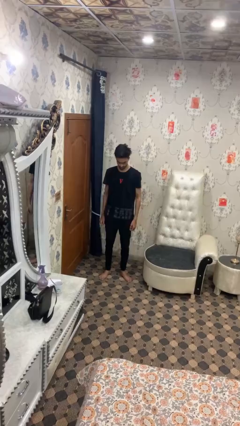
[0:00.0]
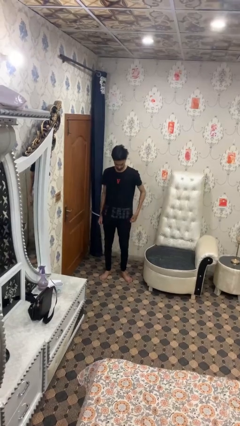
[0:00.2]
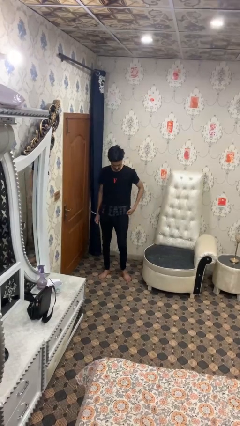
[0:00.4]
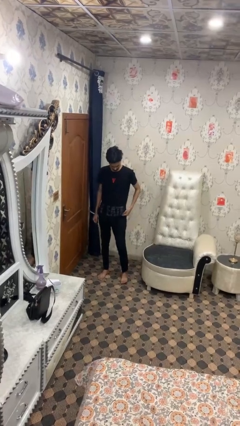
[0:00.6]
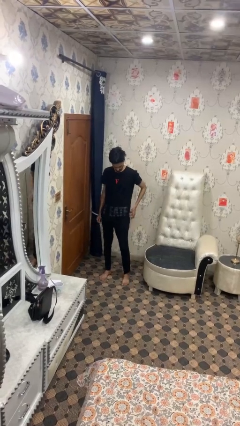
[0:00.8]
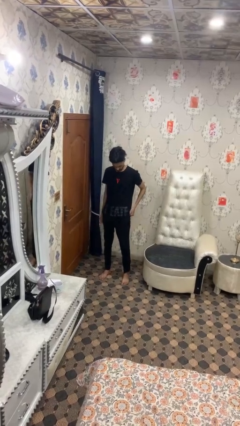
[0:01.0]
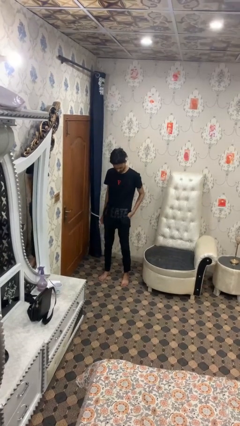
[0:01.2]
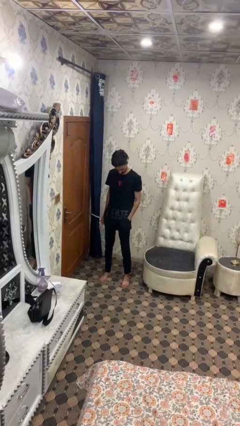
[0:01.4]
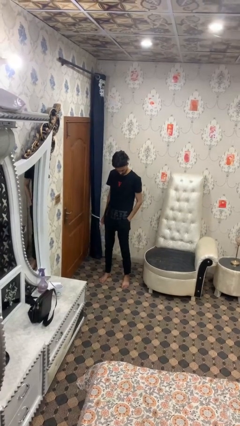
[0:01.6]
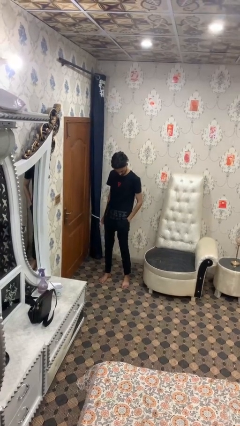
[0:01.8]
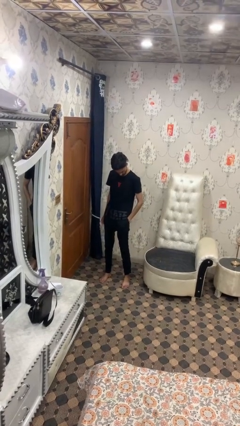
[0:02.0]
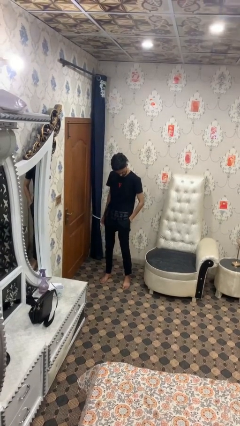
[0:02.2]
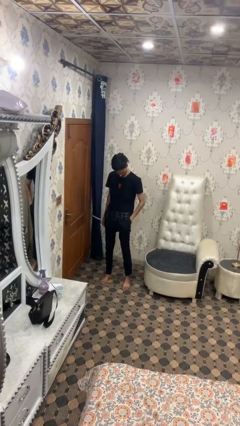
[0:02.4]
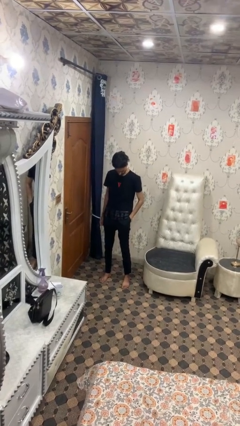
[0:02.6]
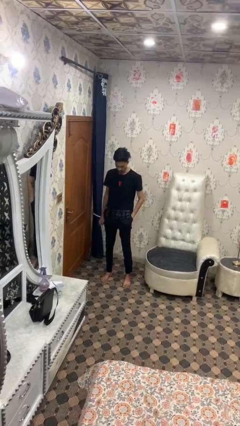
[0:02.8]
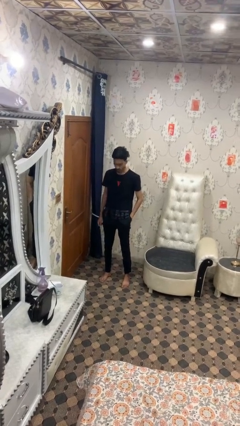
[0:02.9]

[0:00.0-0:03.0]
person puts hands in back pockets

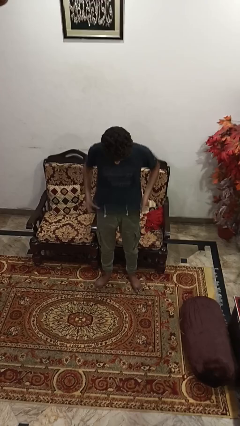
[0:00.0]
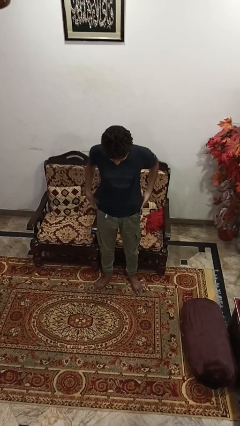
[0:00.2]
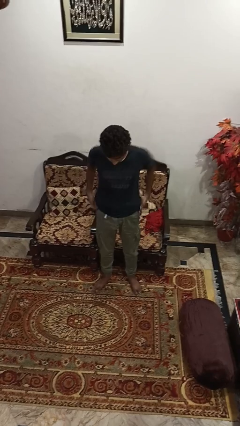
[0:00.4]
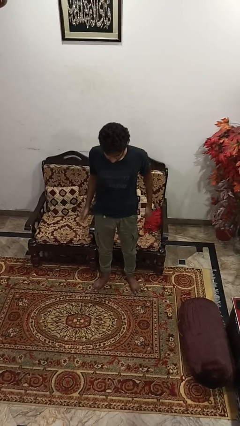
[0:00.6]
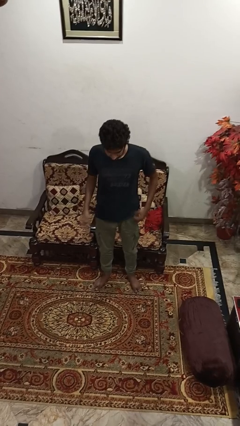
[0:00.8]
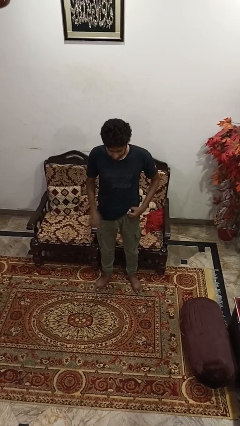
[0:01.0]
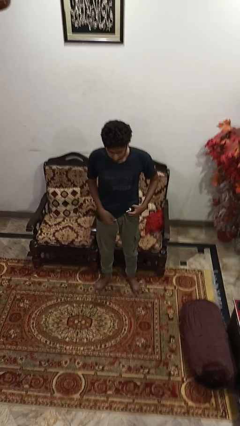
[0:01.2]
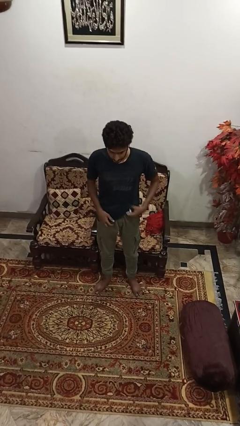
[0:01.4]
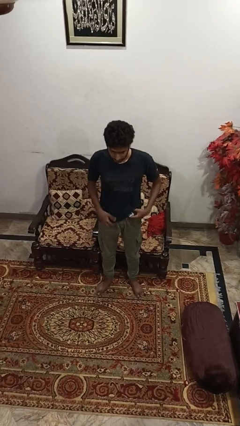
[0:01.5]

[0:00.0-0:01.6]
person untucks shirt

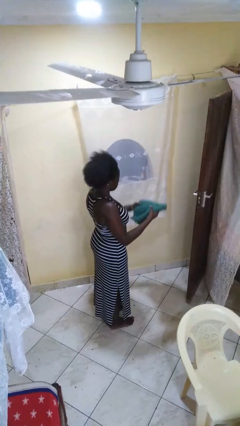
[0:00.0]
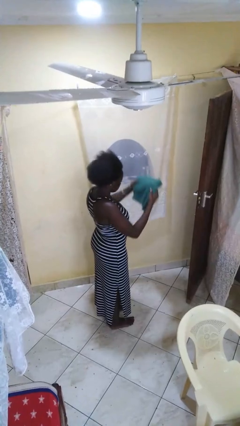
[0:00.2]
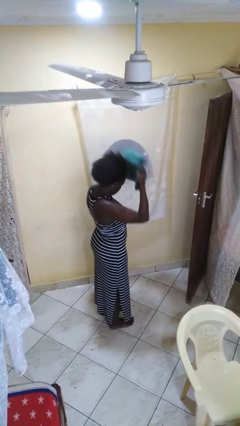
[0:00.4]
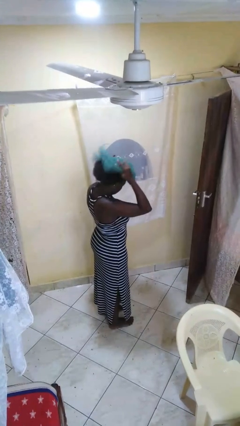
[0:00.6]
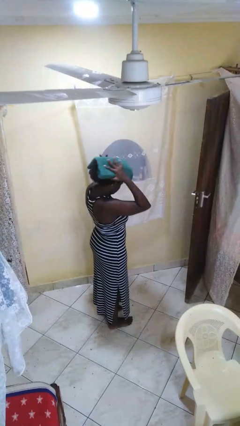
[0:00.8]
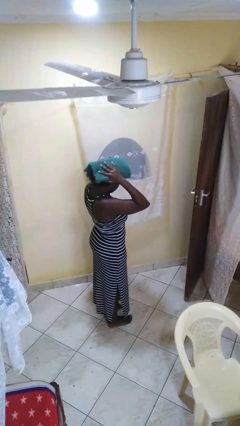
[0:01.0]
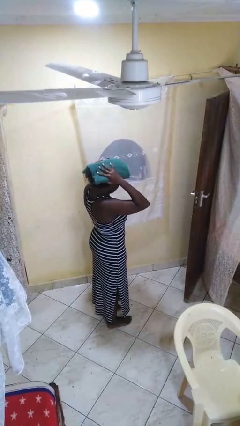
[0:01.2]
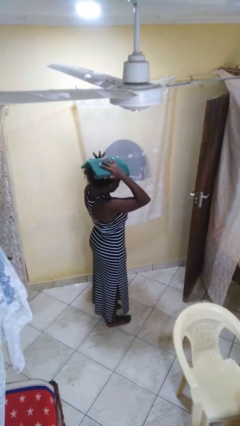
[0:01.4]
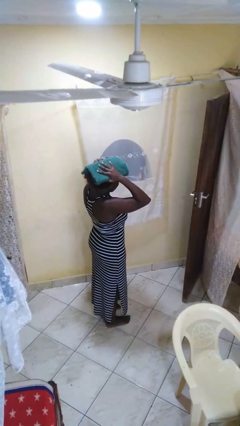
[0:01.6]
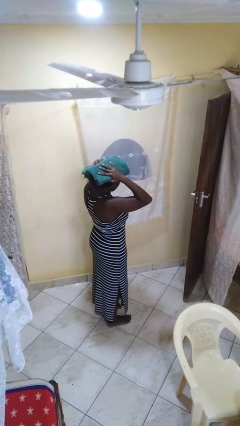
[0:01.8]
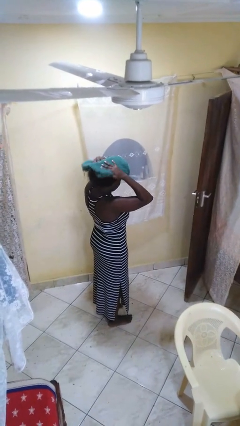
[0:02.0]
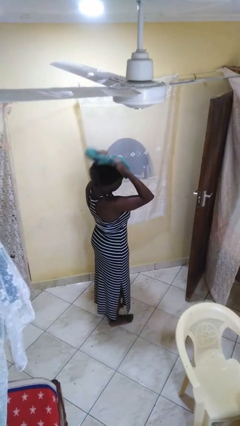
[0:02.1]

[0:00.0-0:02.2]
person dries hair with towel

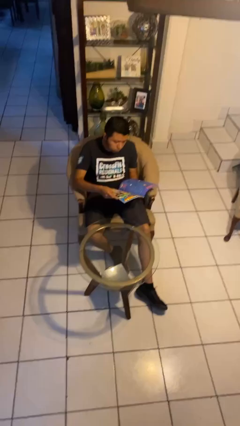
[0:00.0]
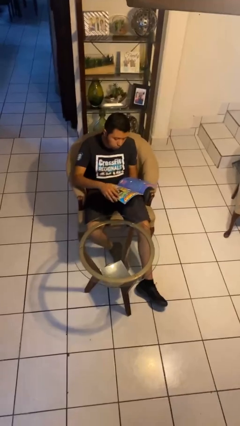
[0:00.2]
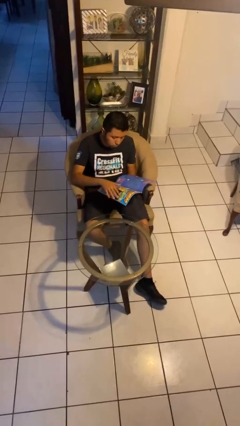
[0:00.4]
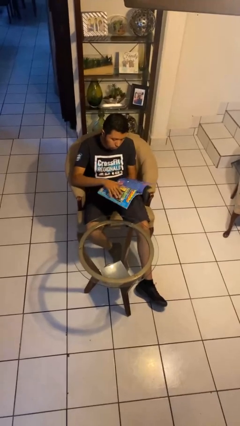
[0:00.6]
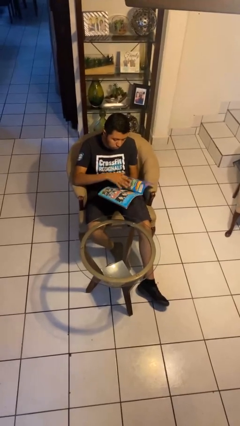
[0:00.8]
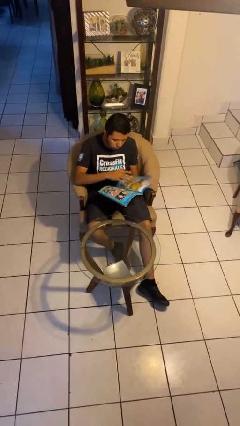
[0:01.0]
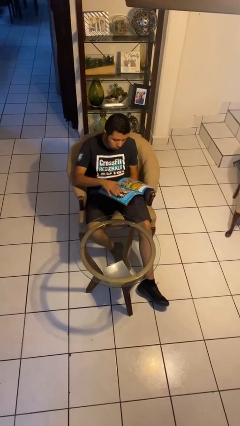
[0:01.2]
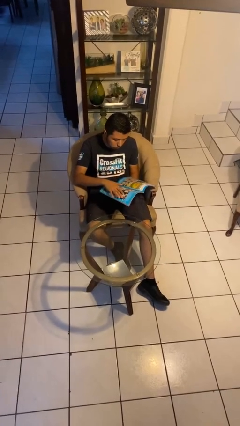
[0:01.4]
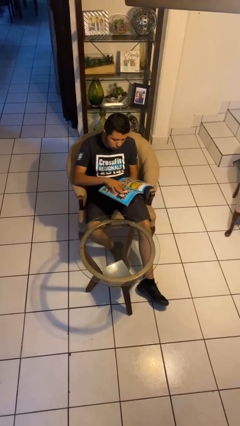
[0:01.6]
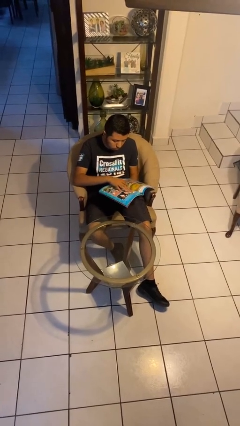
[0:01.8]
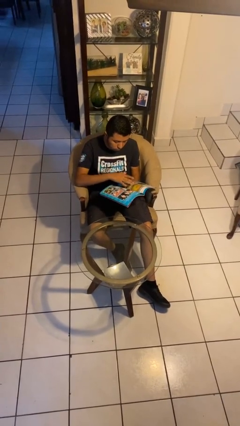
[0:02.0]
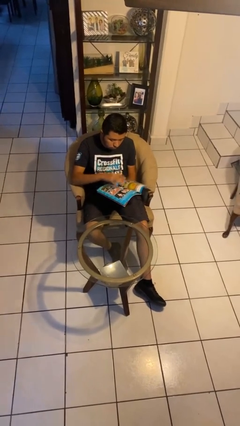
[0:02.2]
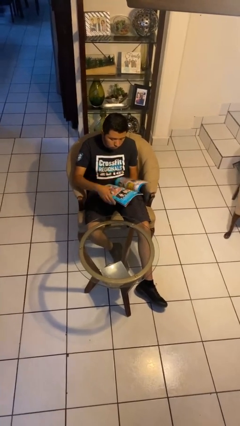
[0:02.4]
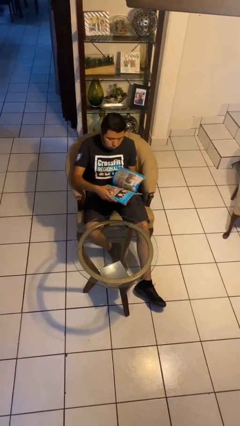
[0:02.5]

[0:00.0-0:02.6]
person reads magazine

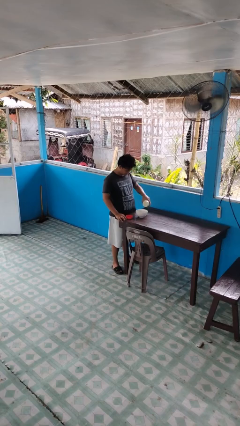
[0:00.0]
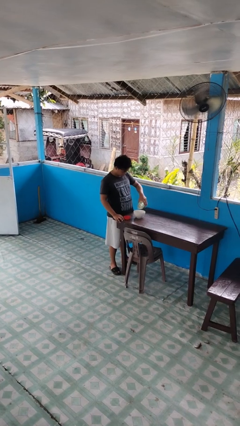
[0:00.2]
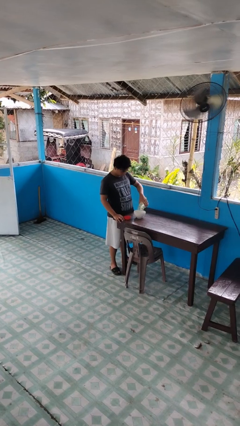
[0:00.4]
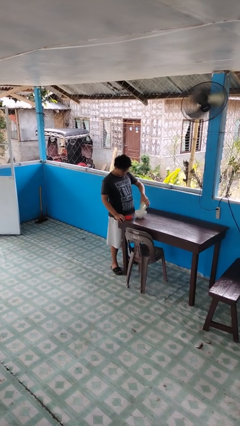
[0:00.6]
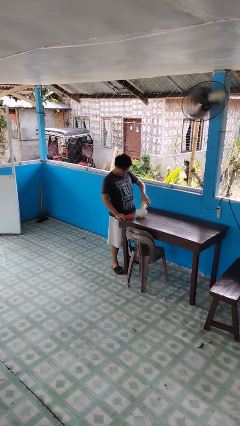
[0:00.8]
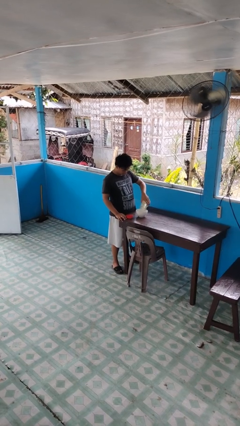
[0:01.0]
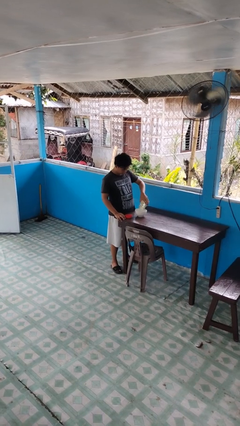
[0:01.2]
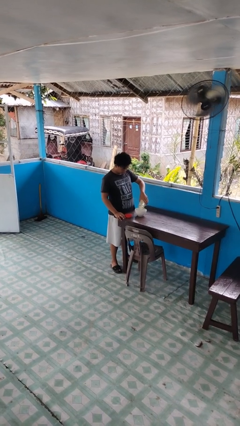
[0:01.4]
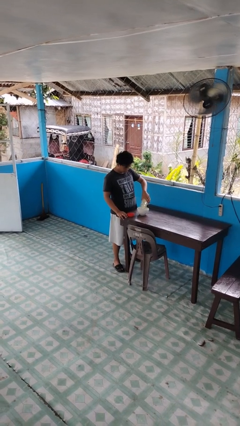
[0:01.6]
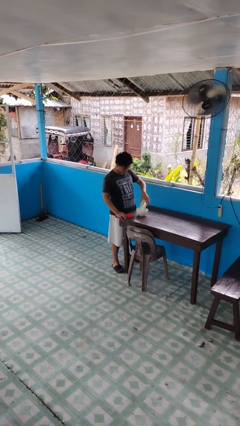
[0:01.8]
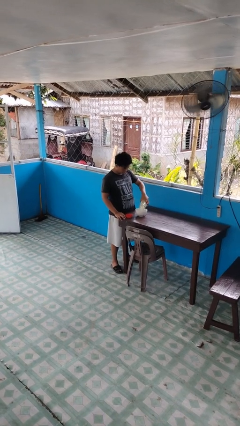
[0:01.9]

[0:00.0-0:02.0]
person pours into bowl

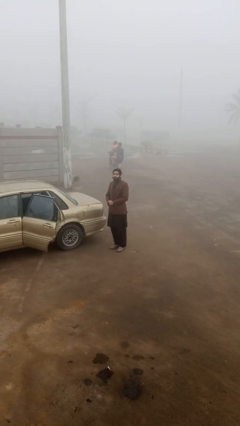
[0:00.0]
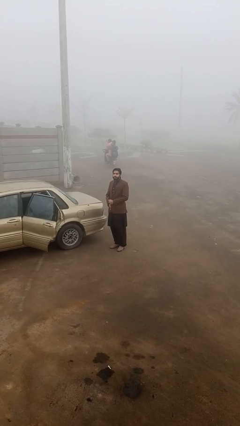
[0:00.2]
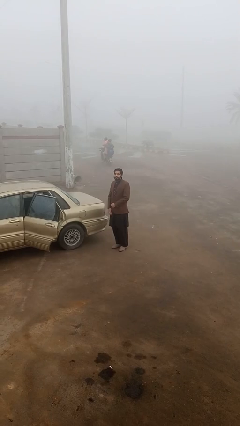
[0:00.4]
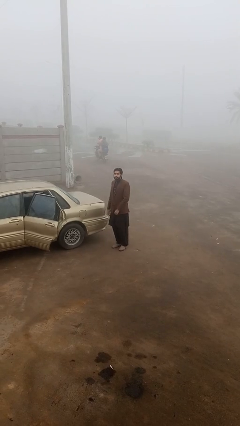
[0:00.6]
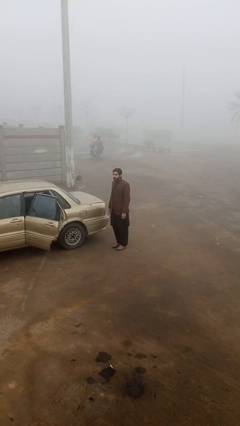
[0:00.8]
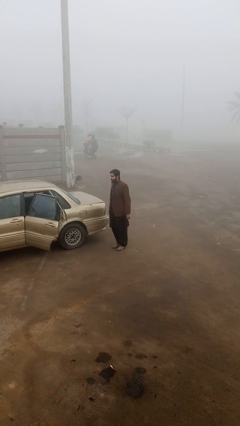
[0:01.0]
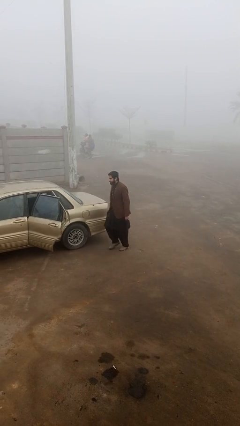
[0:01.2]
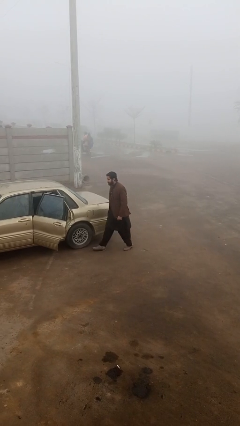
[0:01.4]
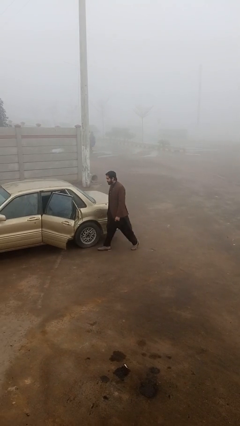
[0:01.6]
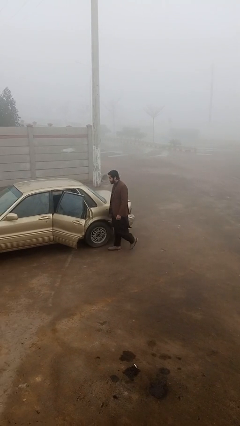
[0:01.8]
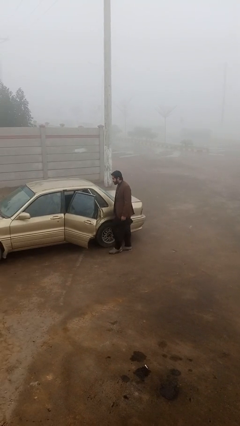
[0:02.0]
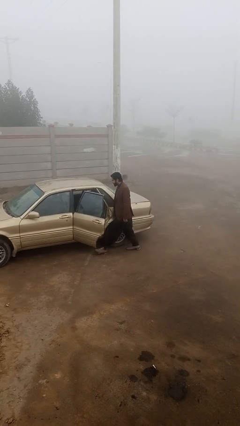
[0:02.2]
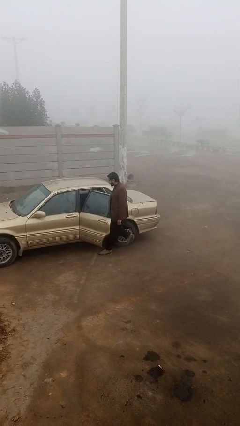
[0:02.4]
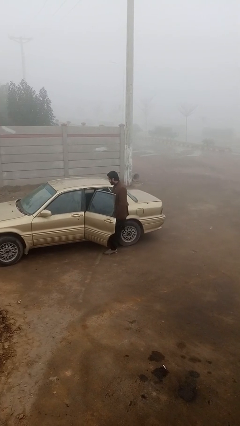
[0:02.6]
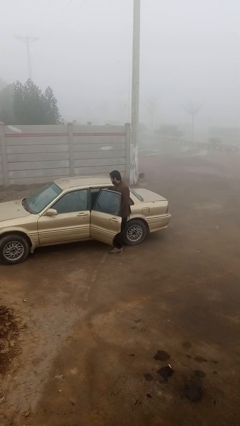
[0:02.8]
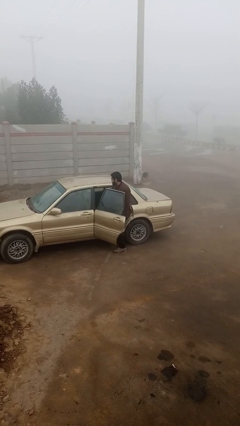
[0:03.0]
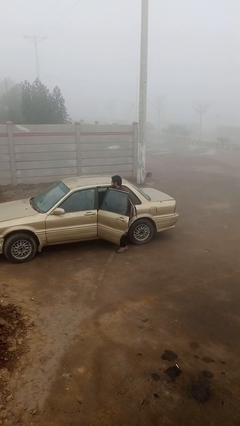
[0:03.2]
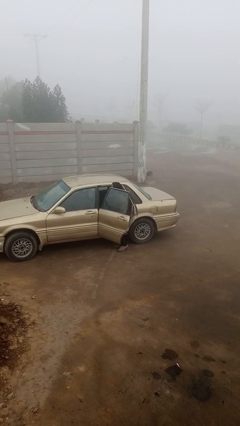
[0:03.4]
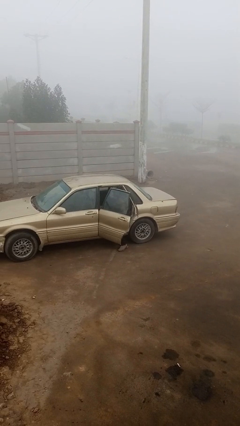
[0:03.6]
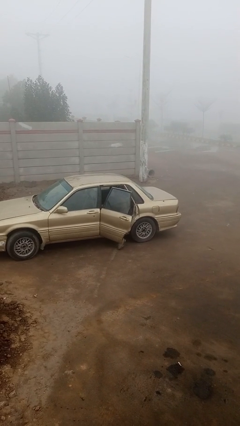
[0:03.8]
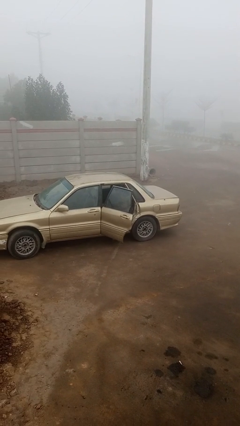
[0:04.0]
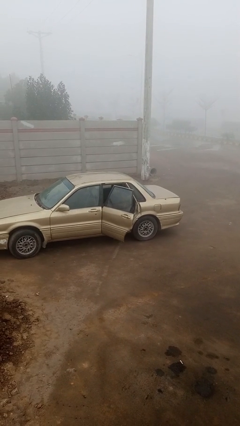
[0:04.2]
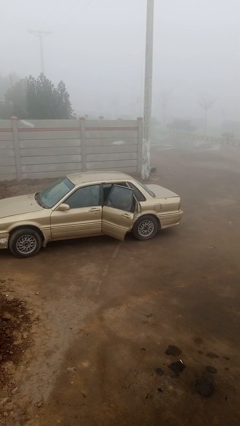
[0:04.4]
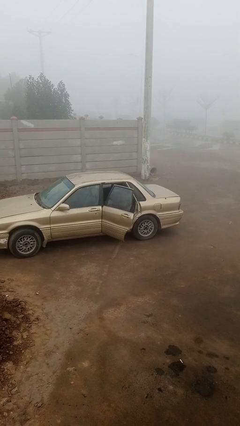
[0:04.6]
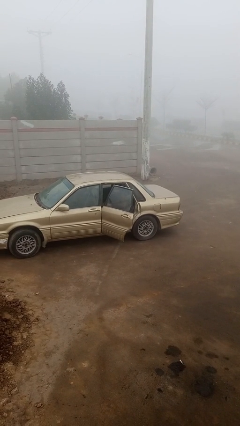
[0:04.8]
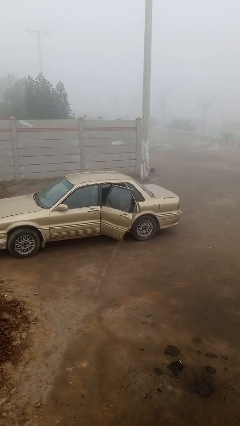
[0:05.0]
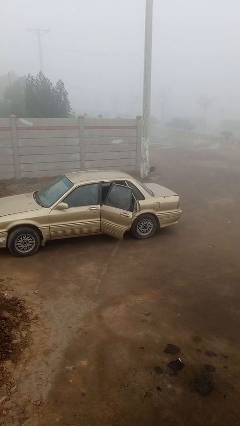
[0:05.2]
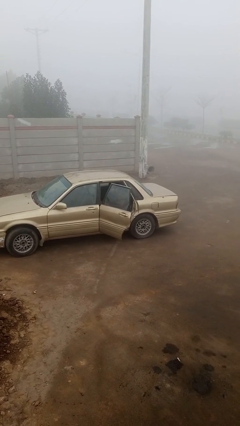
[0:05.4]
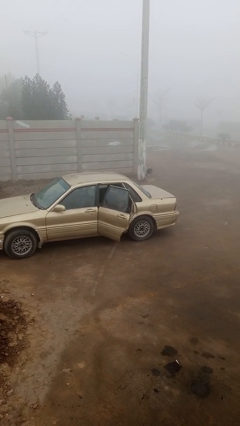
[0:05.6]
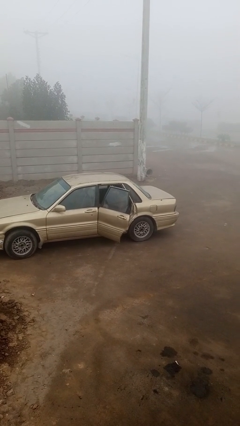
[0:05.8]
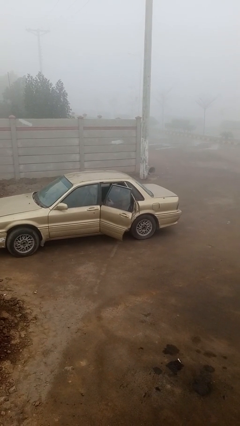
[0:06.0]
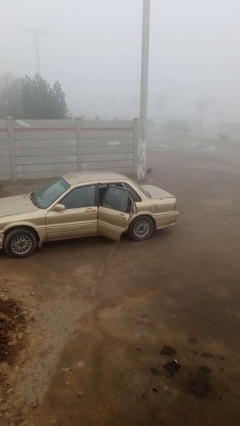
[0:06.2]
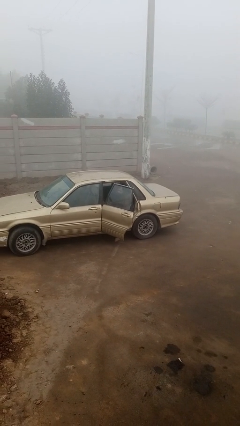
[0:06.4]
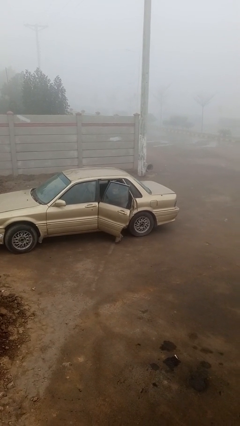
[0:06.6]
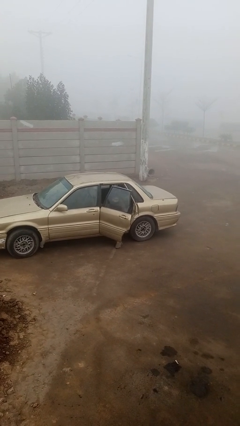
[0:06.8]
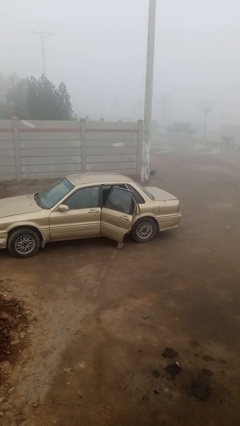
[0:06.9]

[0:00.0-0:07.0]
person enters car
